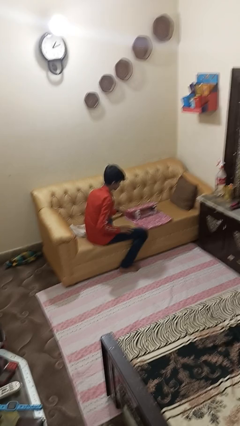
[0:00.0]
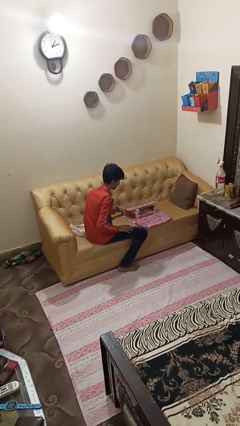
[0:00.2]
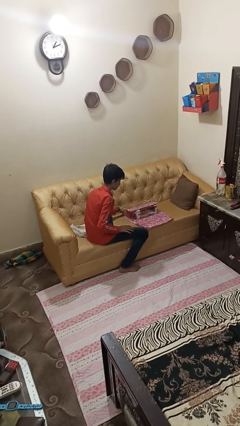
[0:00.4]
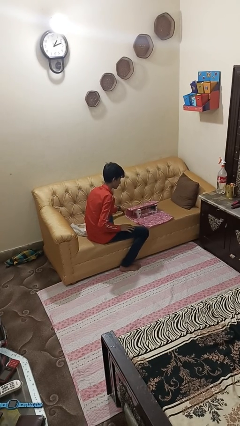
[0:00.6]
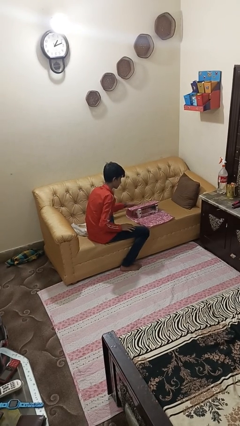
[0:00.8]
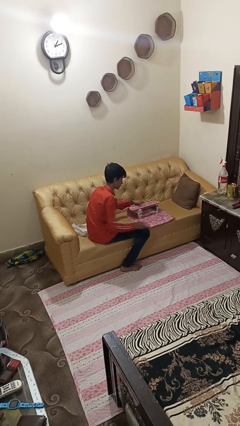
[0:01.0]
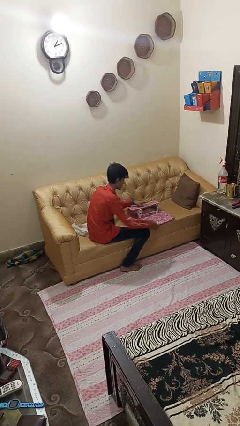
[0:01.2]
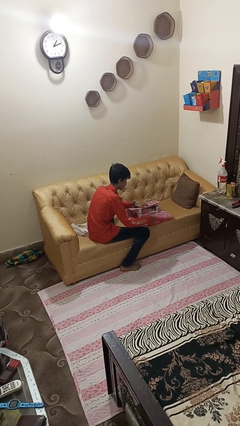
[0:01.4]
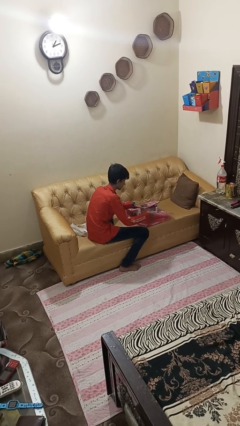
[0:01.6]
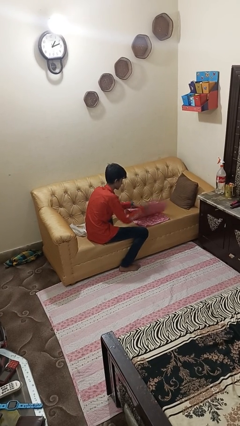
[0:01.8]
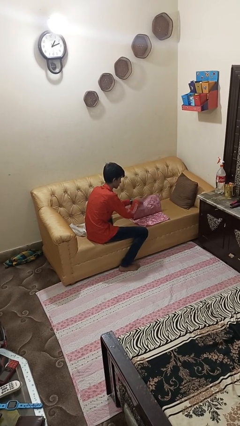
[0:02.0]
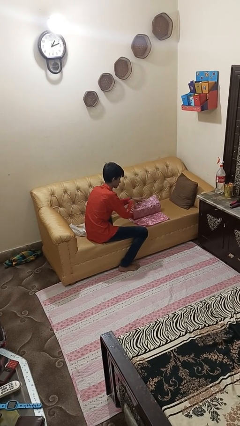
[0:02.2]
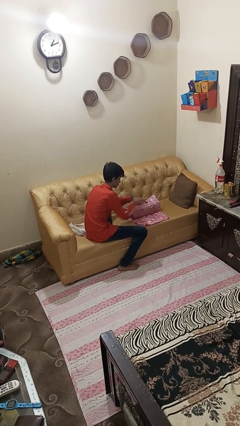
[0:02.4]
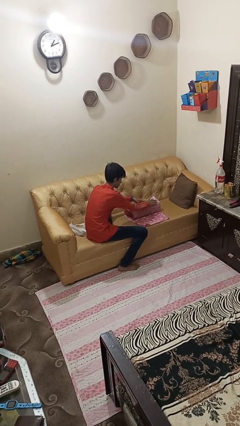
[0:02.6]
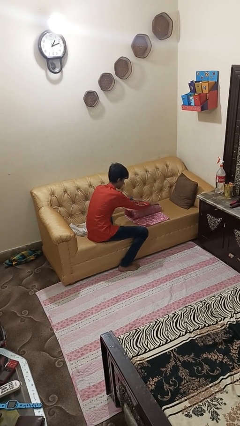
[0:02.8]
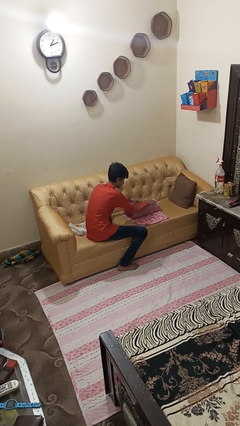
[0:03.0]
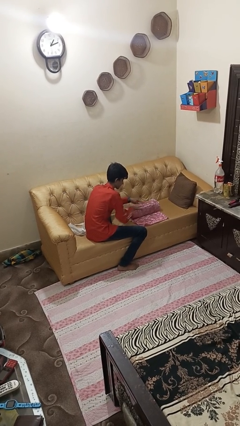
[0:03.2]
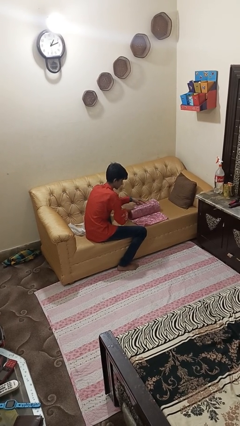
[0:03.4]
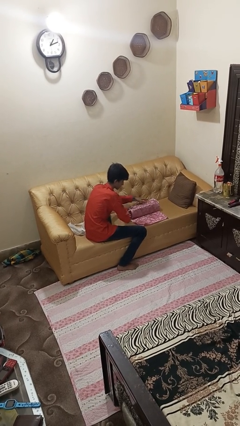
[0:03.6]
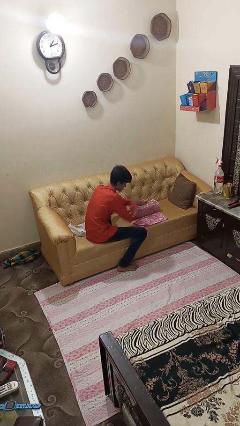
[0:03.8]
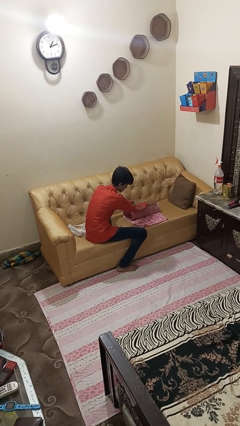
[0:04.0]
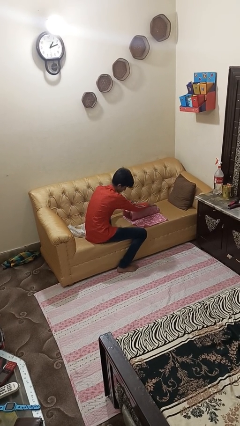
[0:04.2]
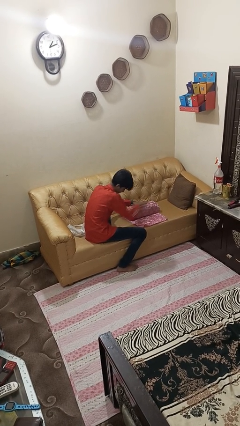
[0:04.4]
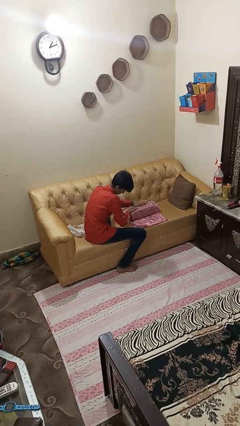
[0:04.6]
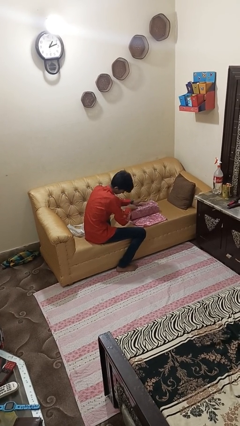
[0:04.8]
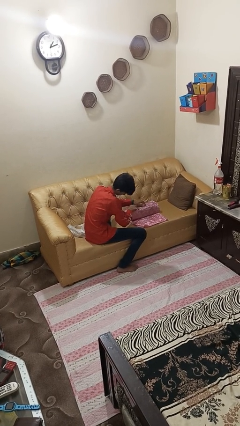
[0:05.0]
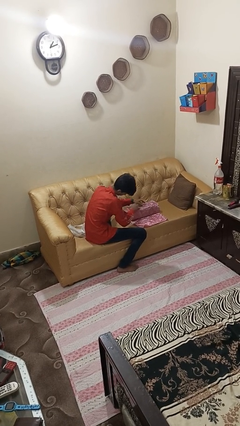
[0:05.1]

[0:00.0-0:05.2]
person wraps box

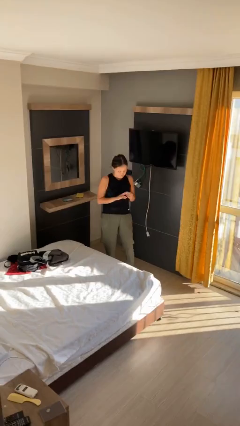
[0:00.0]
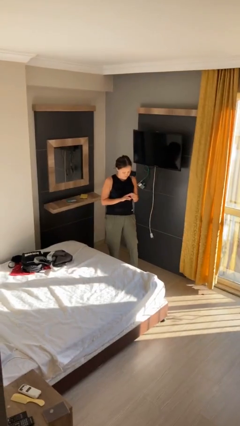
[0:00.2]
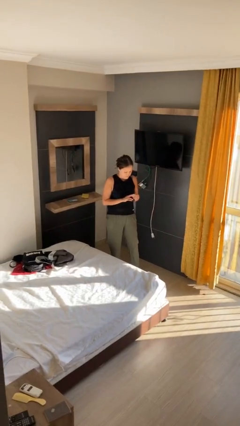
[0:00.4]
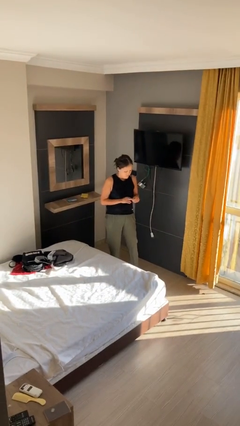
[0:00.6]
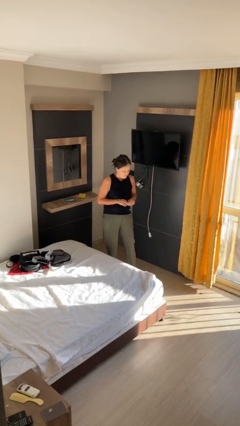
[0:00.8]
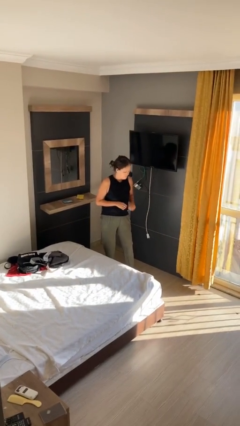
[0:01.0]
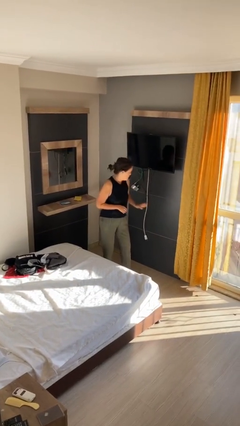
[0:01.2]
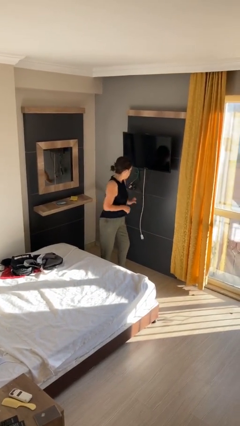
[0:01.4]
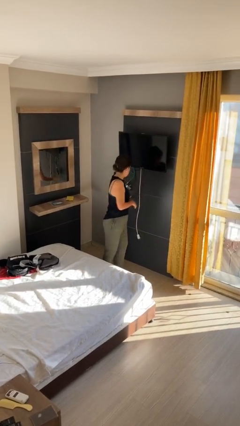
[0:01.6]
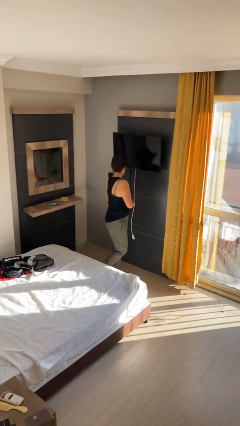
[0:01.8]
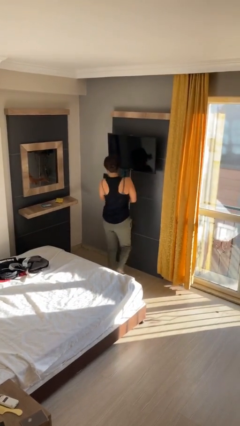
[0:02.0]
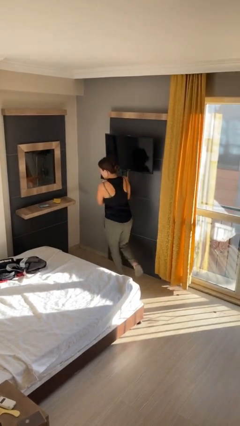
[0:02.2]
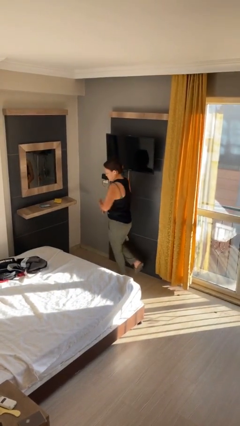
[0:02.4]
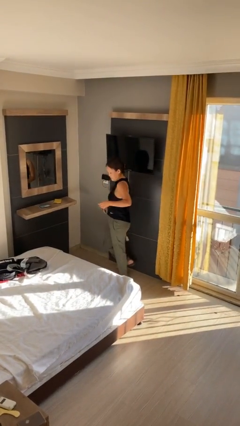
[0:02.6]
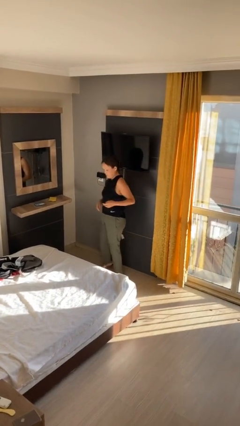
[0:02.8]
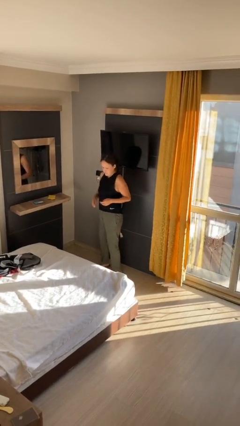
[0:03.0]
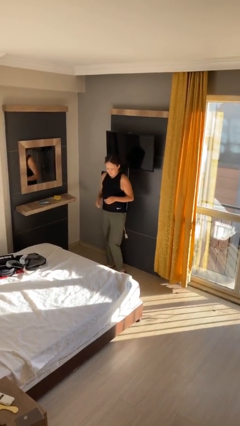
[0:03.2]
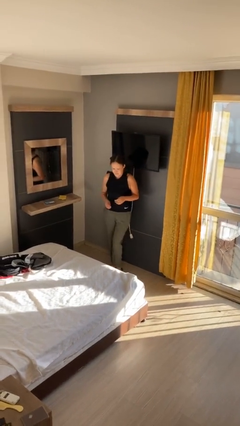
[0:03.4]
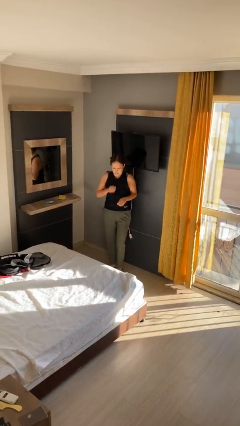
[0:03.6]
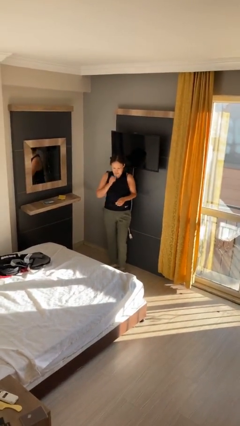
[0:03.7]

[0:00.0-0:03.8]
person twirls

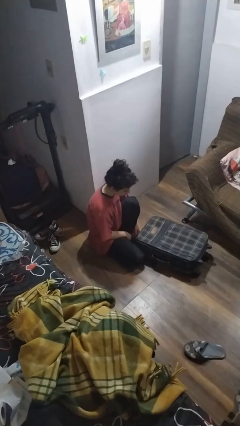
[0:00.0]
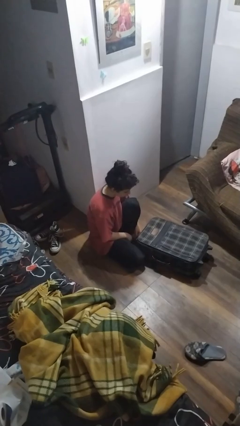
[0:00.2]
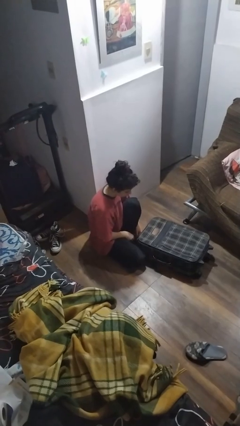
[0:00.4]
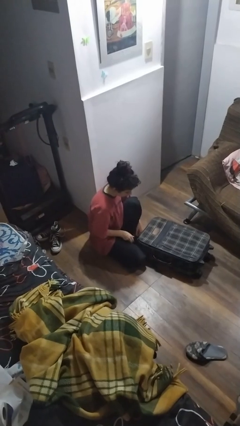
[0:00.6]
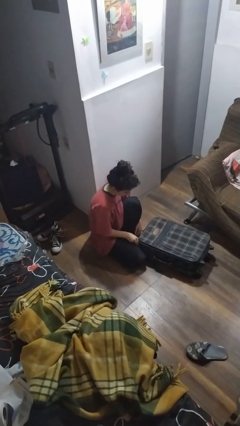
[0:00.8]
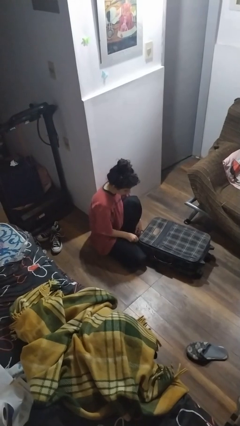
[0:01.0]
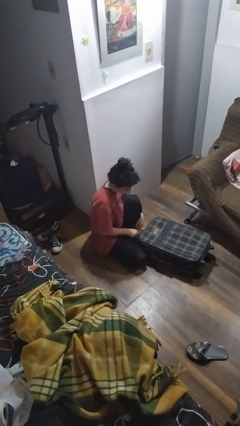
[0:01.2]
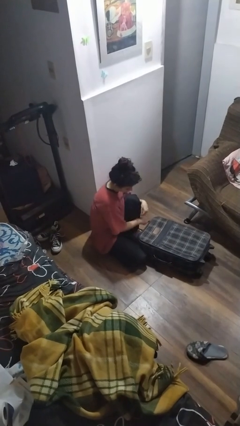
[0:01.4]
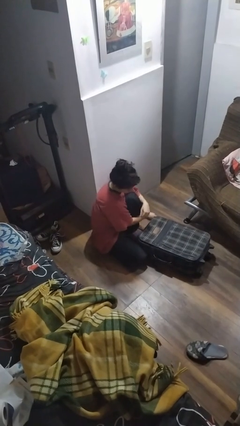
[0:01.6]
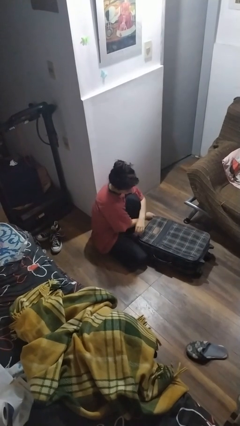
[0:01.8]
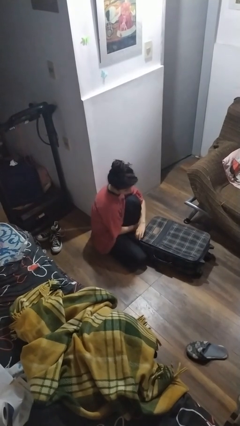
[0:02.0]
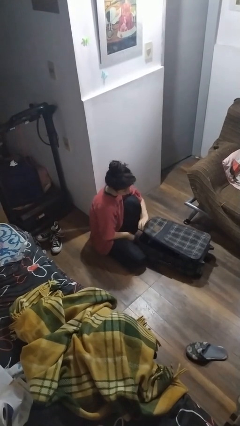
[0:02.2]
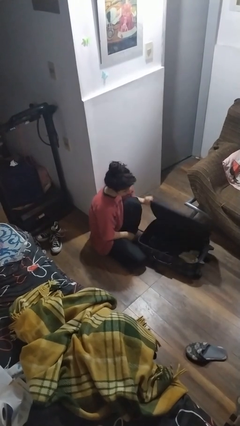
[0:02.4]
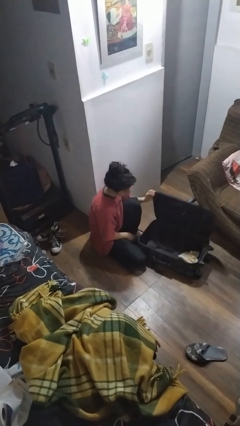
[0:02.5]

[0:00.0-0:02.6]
person opens suitcase

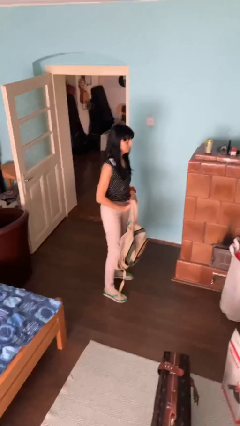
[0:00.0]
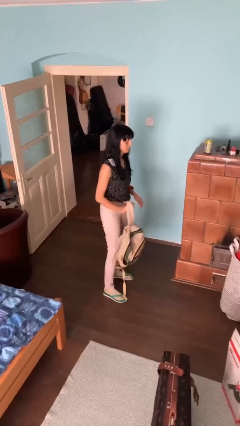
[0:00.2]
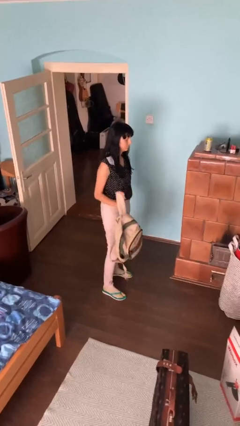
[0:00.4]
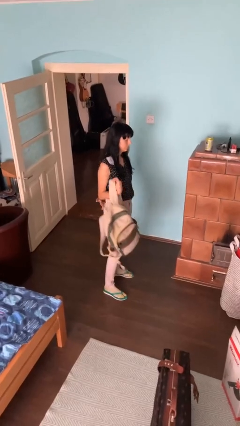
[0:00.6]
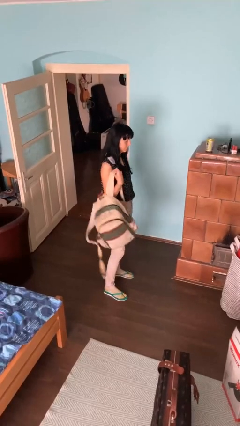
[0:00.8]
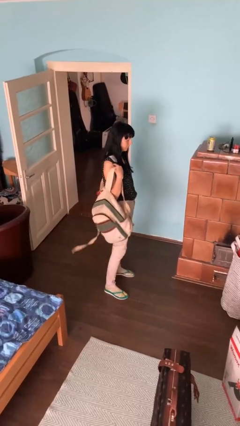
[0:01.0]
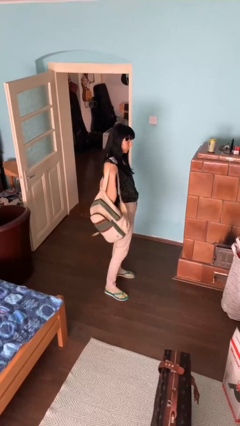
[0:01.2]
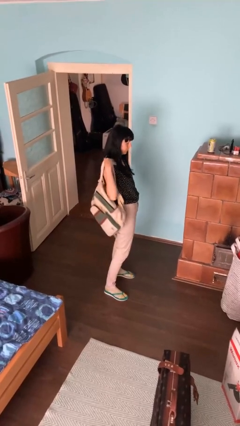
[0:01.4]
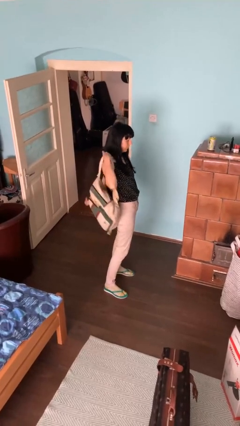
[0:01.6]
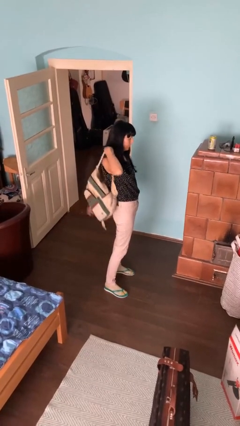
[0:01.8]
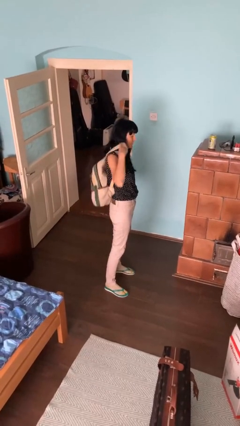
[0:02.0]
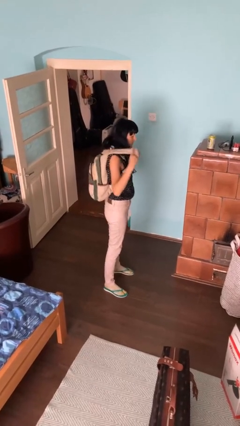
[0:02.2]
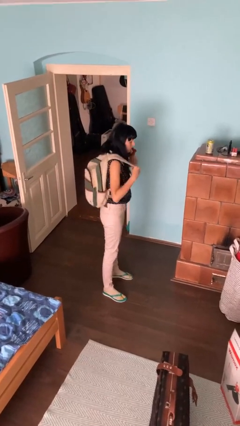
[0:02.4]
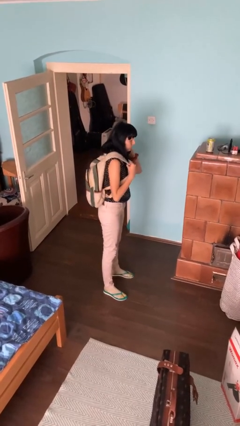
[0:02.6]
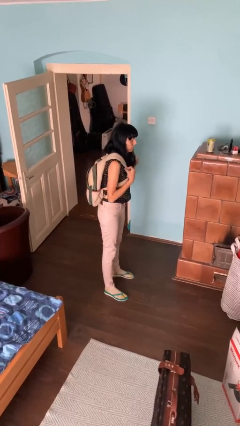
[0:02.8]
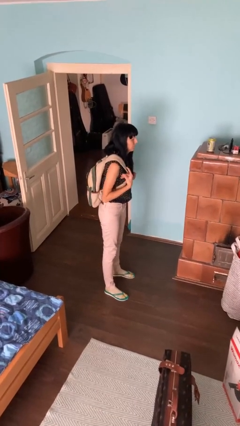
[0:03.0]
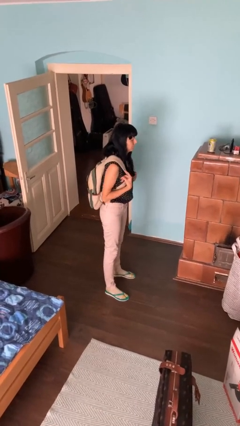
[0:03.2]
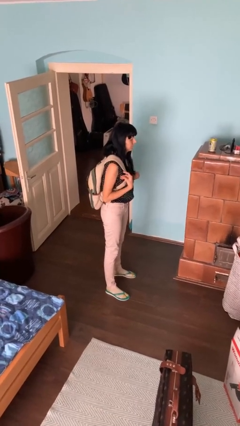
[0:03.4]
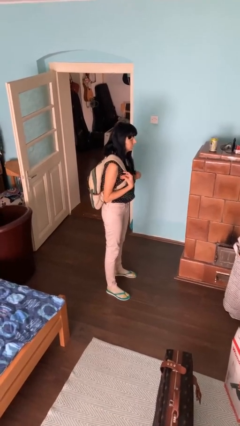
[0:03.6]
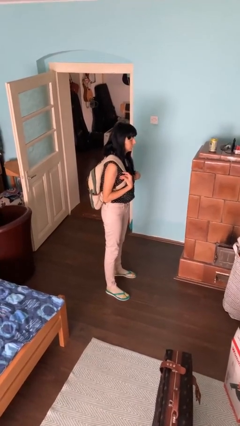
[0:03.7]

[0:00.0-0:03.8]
person puts on backpack

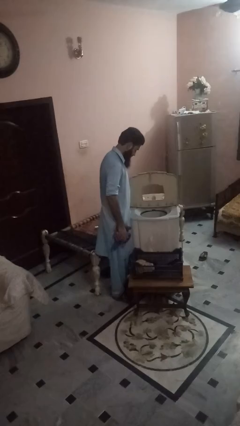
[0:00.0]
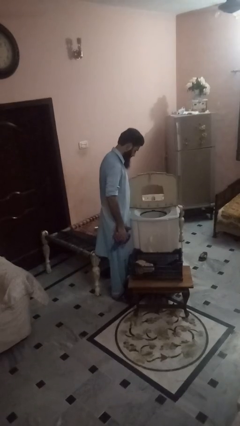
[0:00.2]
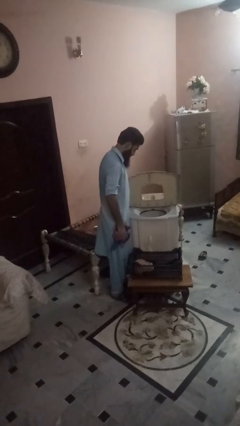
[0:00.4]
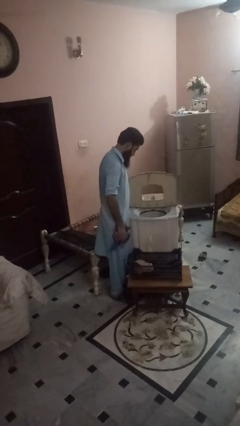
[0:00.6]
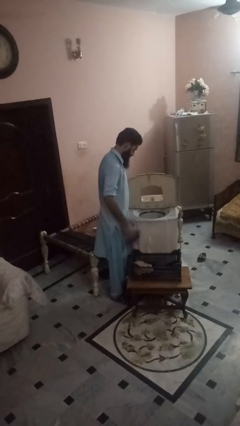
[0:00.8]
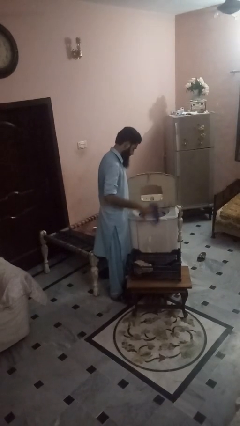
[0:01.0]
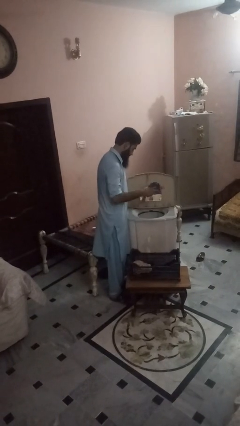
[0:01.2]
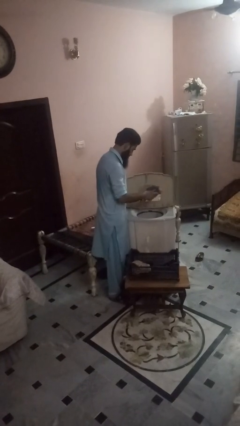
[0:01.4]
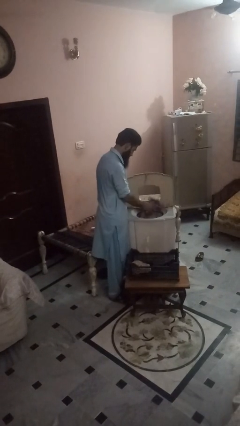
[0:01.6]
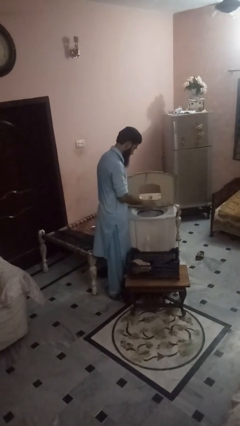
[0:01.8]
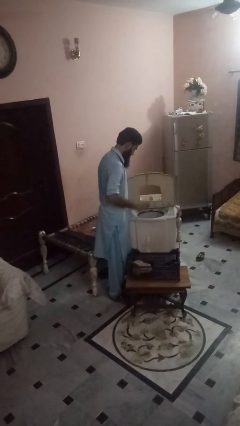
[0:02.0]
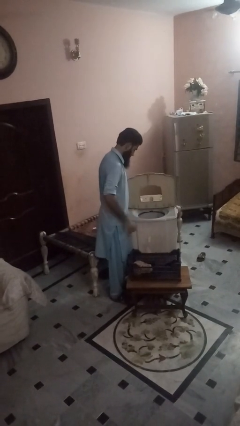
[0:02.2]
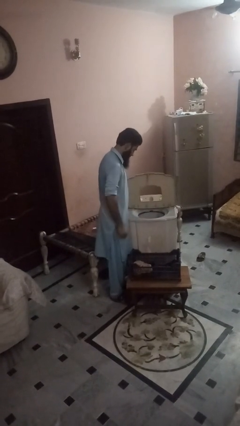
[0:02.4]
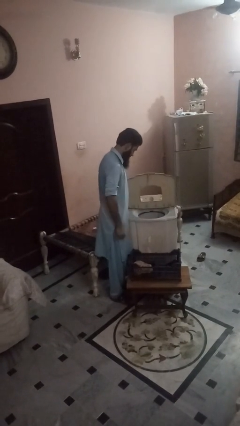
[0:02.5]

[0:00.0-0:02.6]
person loads dishwasher
